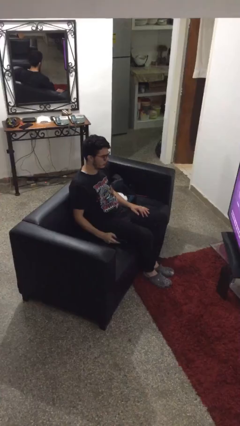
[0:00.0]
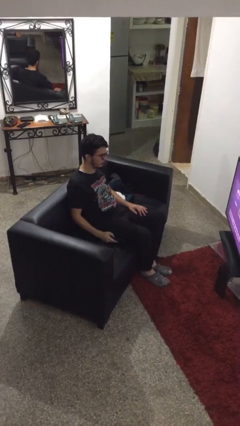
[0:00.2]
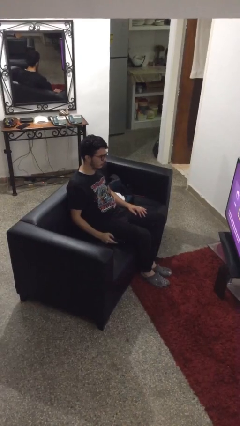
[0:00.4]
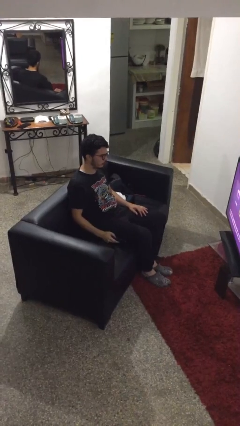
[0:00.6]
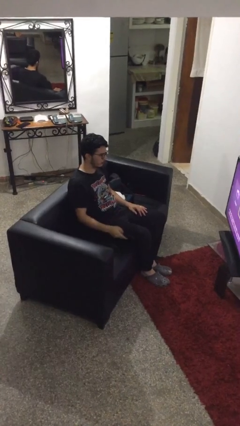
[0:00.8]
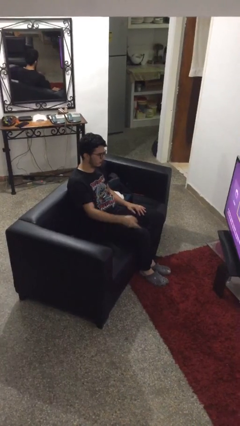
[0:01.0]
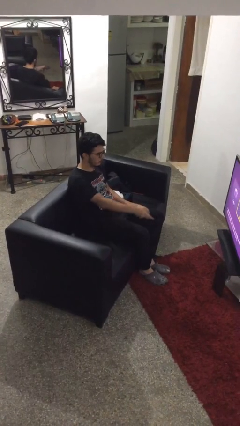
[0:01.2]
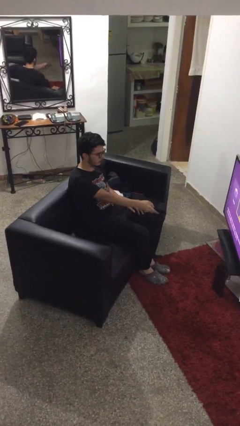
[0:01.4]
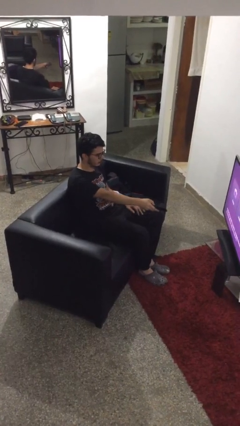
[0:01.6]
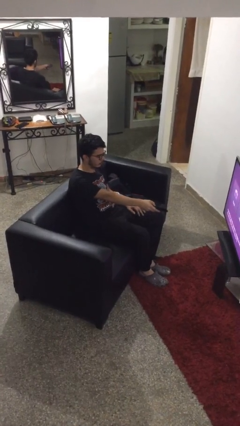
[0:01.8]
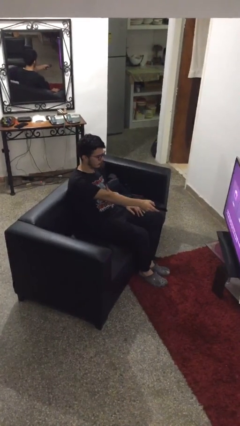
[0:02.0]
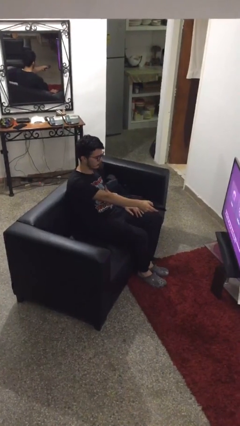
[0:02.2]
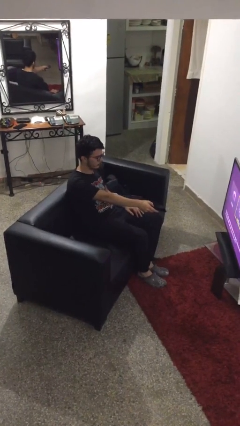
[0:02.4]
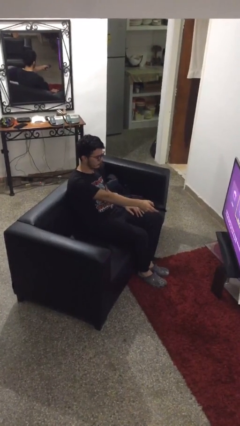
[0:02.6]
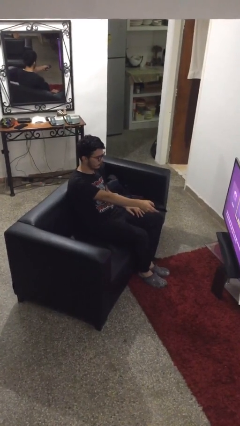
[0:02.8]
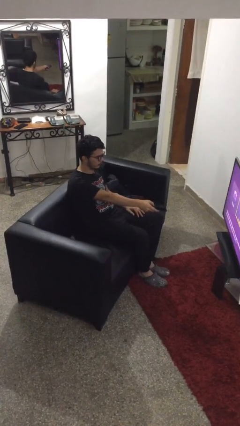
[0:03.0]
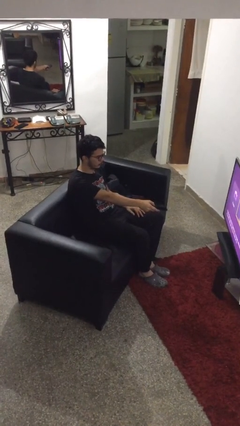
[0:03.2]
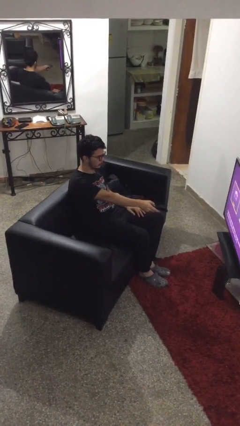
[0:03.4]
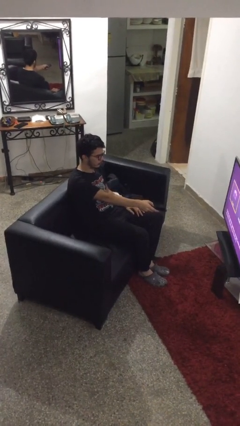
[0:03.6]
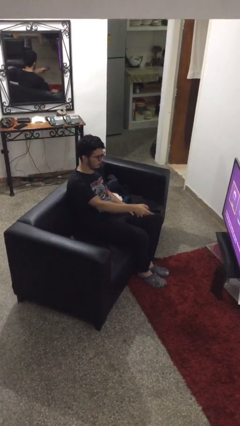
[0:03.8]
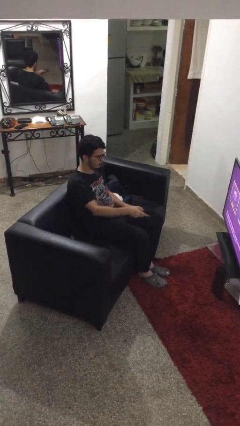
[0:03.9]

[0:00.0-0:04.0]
person uses television remote

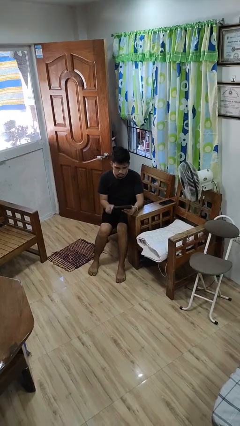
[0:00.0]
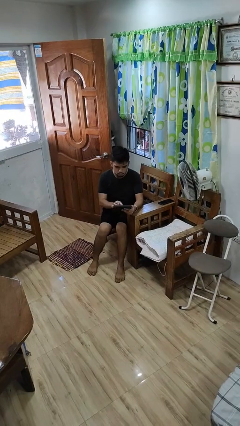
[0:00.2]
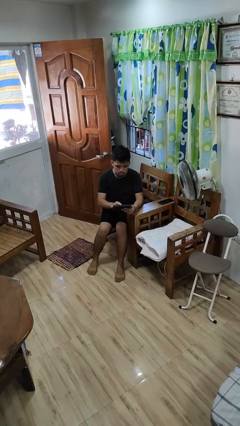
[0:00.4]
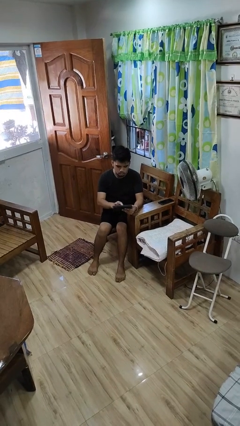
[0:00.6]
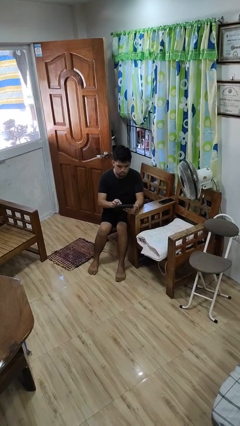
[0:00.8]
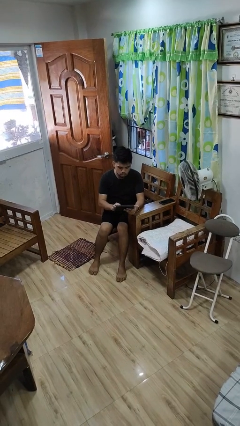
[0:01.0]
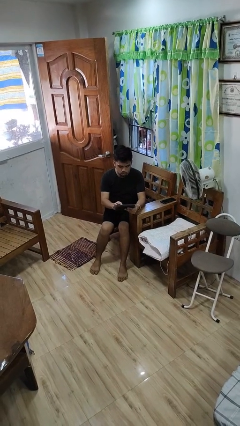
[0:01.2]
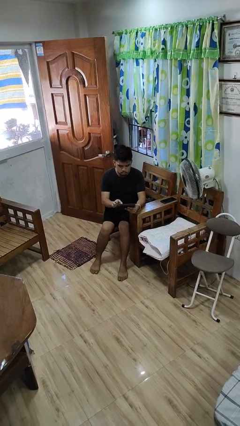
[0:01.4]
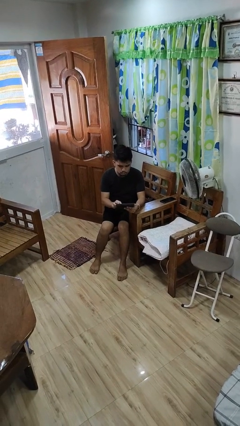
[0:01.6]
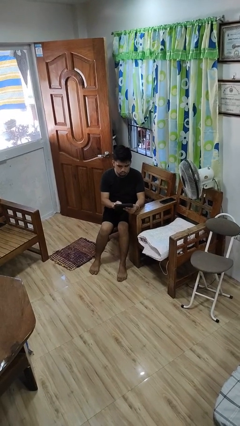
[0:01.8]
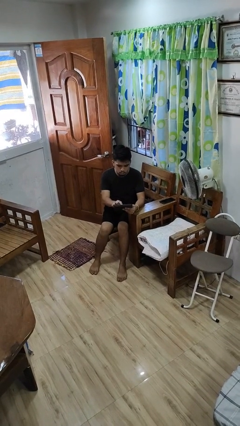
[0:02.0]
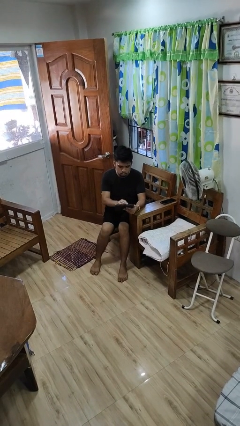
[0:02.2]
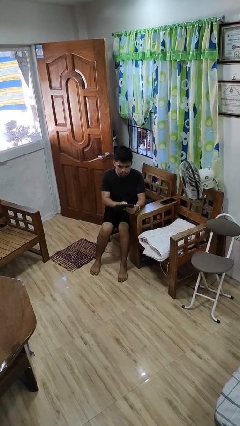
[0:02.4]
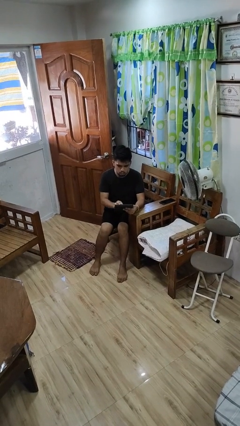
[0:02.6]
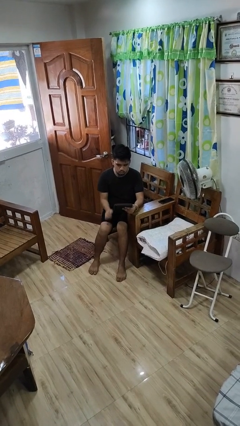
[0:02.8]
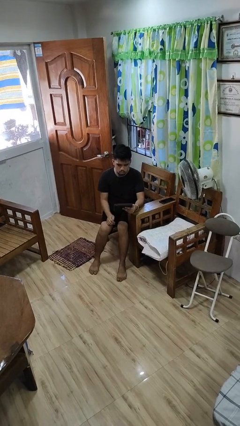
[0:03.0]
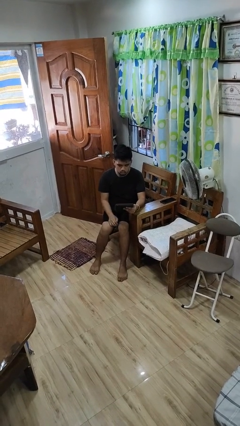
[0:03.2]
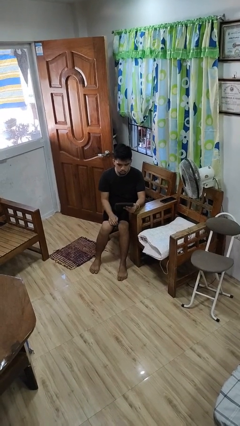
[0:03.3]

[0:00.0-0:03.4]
person interacts with tablet

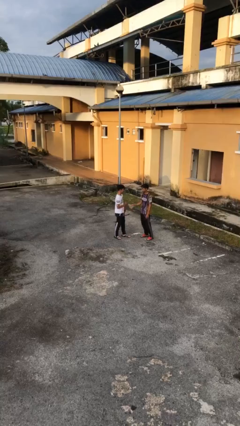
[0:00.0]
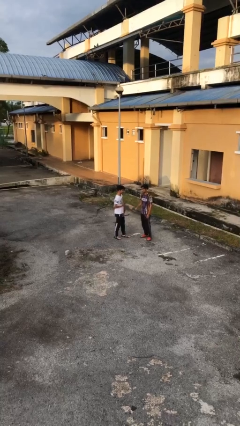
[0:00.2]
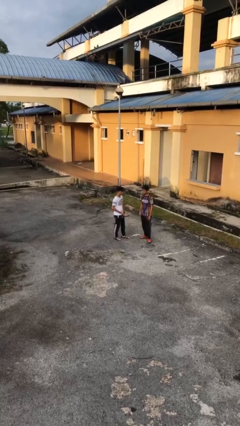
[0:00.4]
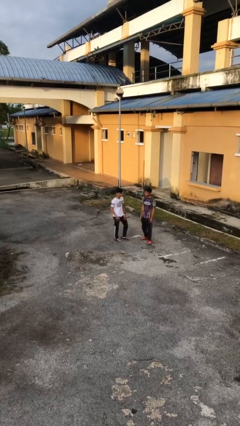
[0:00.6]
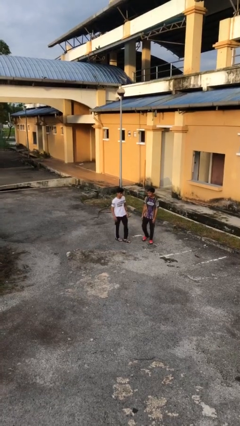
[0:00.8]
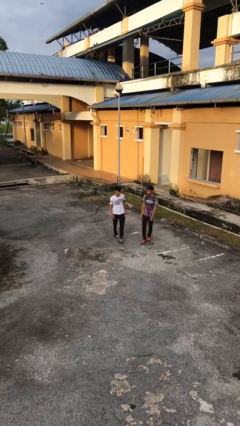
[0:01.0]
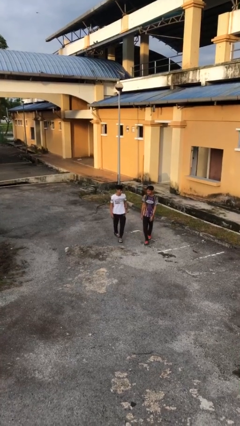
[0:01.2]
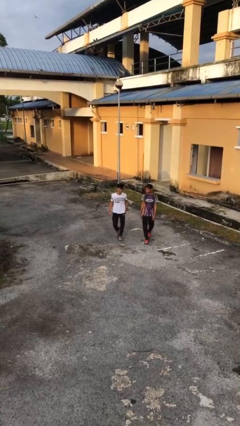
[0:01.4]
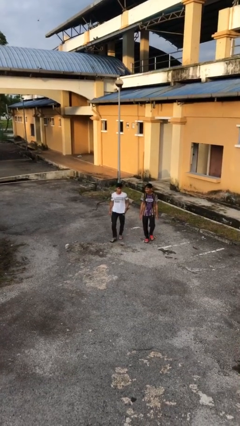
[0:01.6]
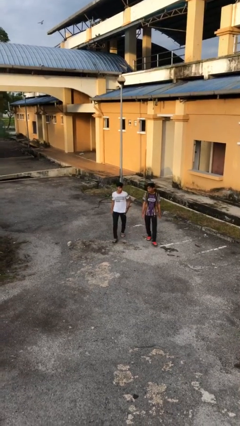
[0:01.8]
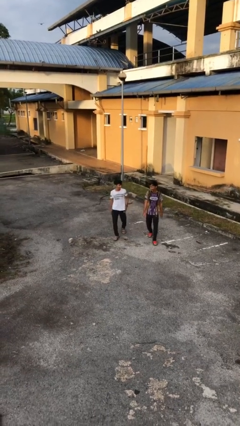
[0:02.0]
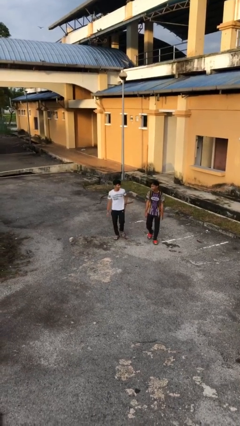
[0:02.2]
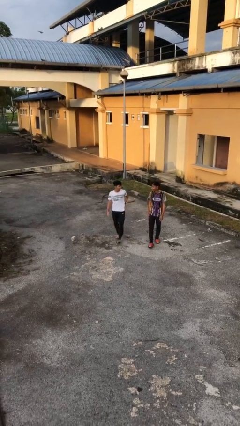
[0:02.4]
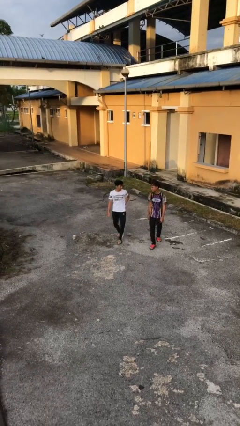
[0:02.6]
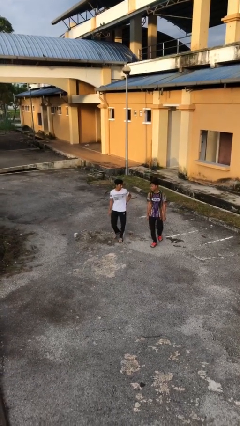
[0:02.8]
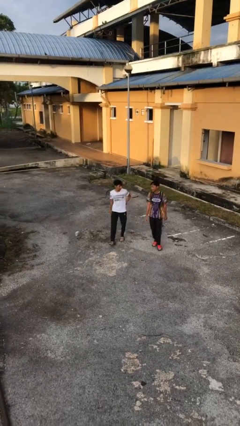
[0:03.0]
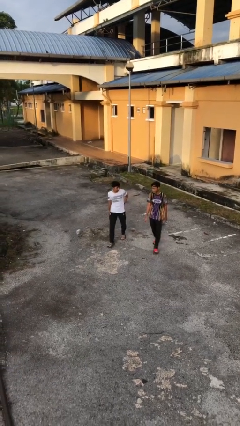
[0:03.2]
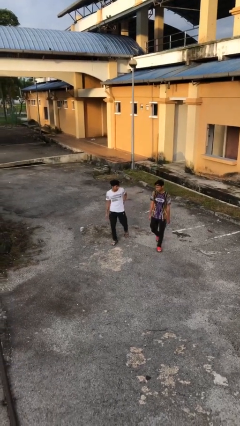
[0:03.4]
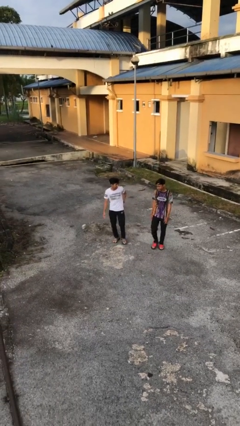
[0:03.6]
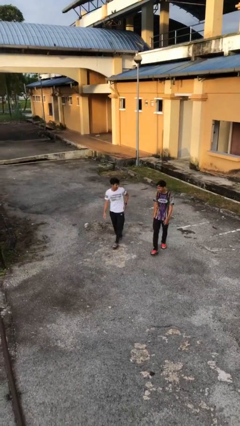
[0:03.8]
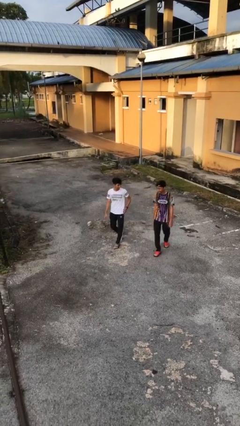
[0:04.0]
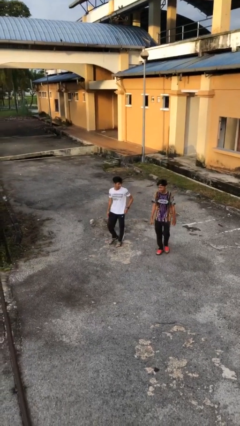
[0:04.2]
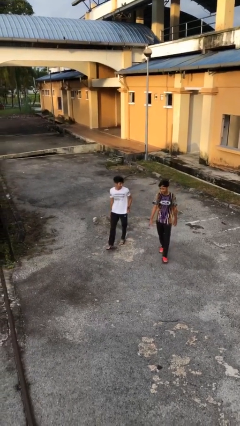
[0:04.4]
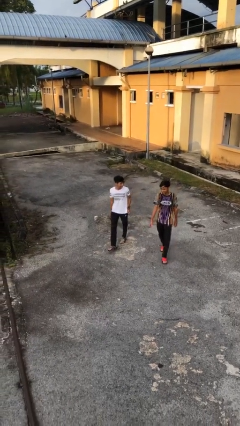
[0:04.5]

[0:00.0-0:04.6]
person talks to person

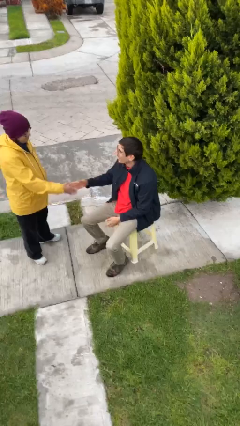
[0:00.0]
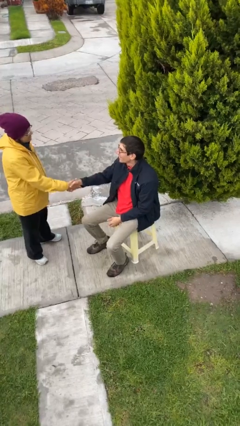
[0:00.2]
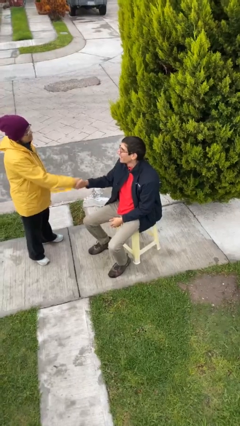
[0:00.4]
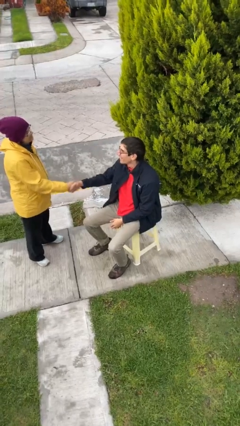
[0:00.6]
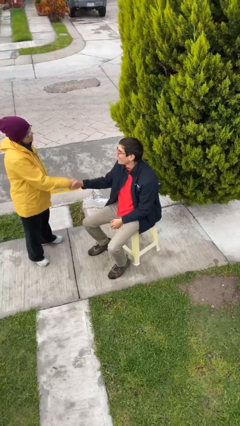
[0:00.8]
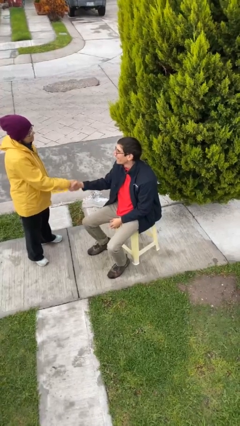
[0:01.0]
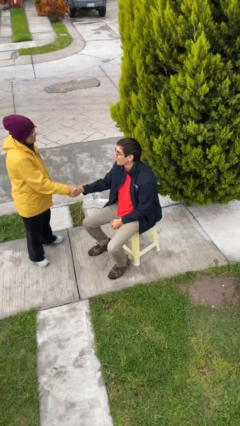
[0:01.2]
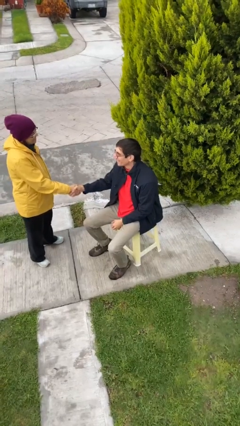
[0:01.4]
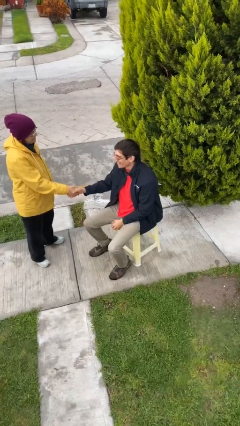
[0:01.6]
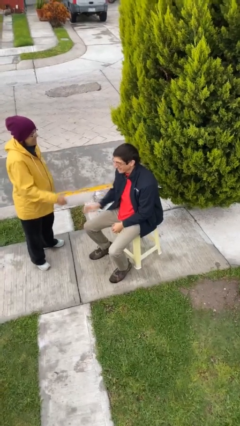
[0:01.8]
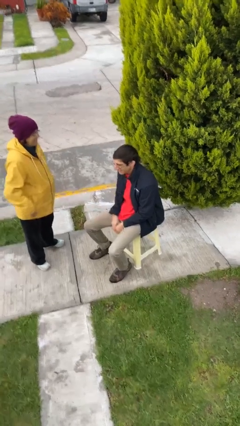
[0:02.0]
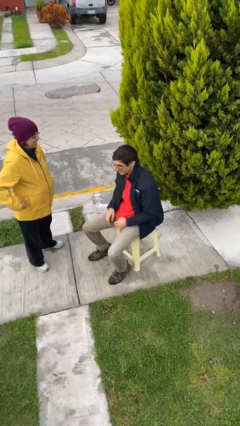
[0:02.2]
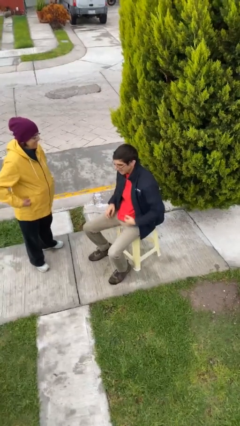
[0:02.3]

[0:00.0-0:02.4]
person shakes hand

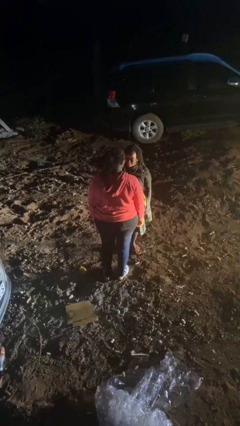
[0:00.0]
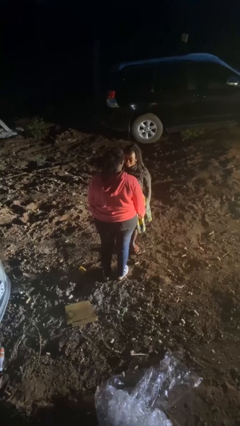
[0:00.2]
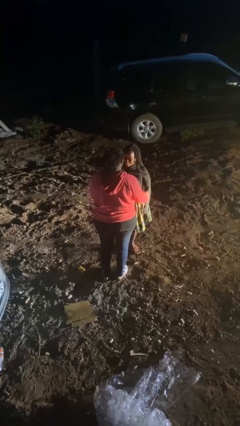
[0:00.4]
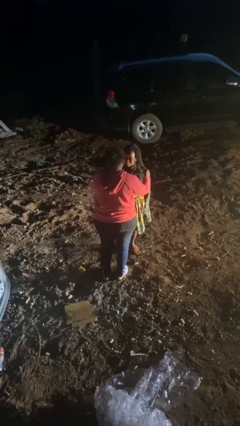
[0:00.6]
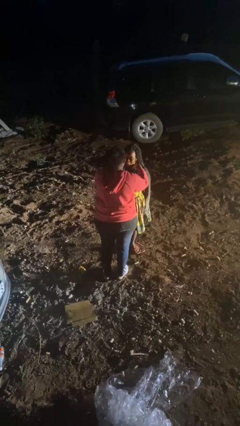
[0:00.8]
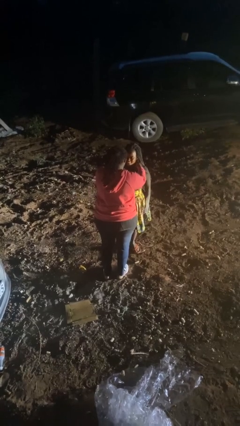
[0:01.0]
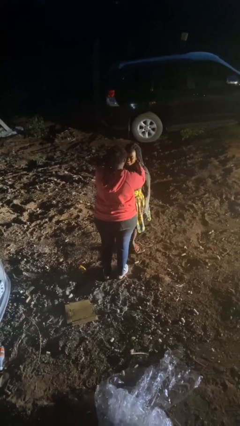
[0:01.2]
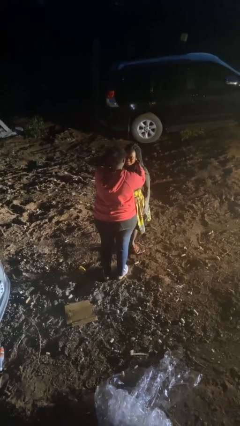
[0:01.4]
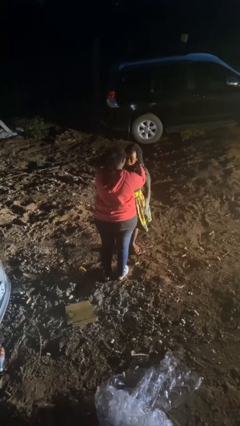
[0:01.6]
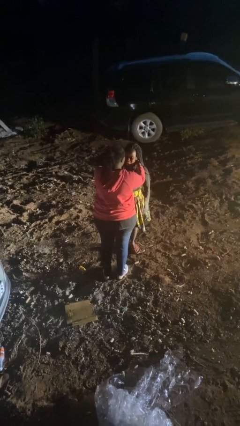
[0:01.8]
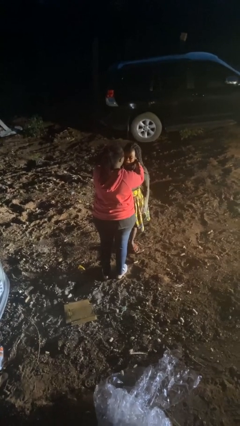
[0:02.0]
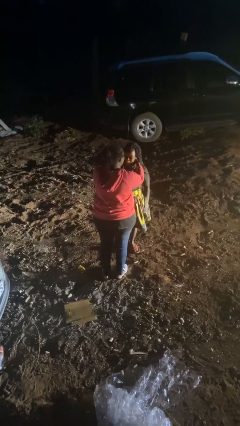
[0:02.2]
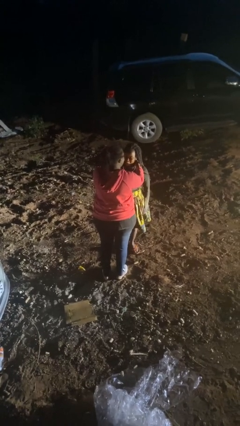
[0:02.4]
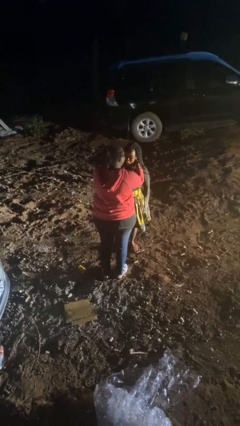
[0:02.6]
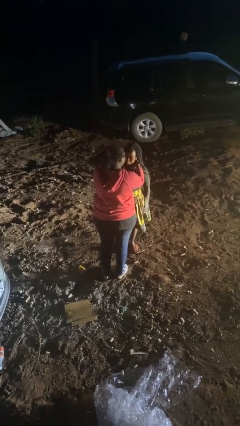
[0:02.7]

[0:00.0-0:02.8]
person tickles person

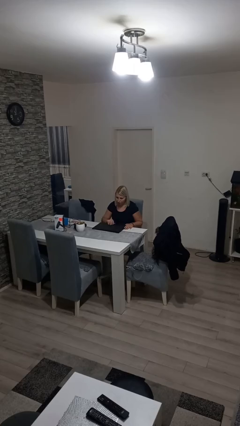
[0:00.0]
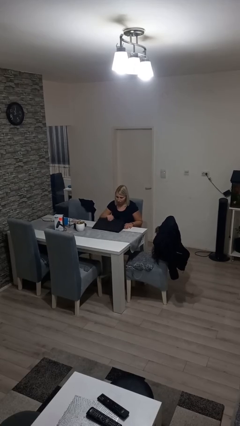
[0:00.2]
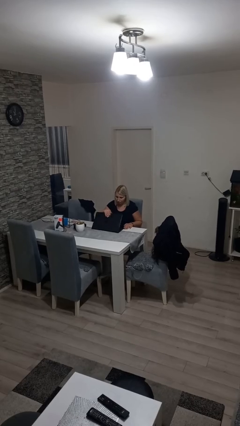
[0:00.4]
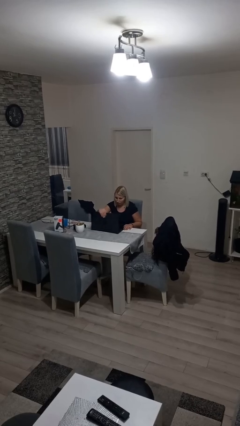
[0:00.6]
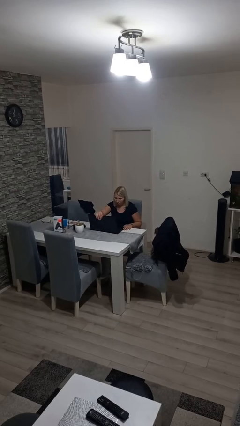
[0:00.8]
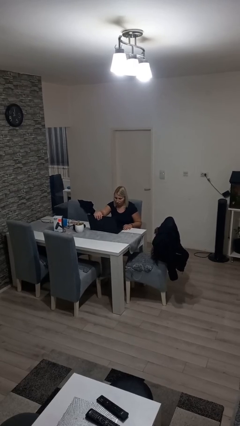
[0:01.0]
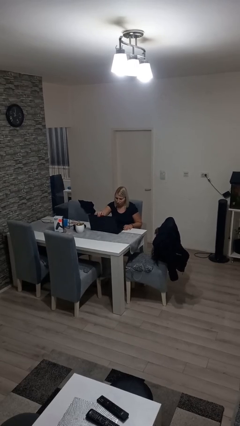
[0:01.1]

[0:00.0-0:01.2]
person opens laptop
